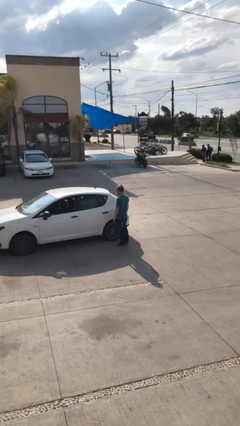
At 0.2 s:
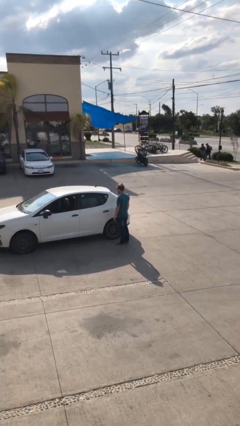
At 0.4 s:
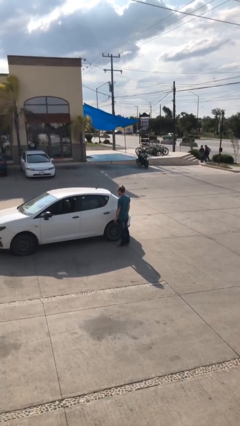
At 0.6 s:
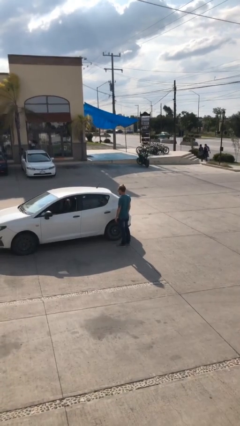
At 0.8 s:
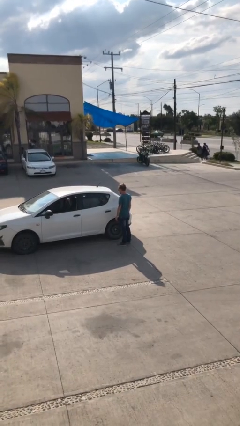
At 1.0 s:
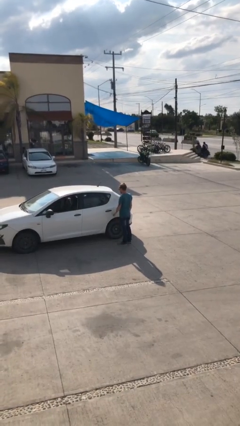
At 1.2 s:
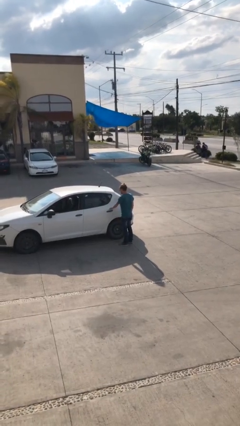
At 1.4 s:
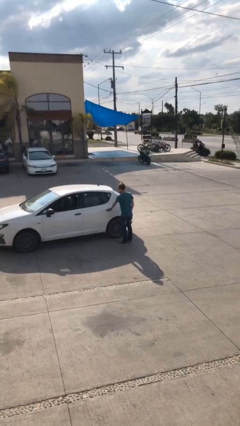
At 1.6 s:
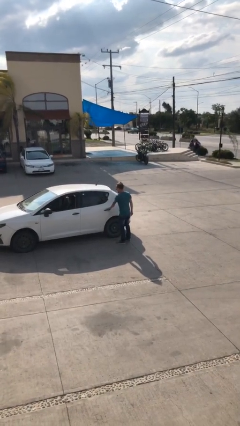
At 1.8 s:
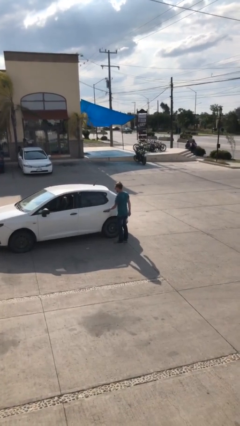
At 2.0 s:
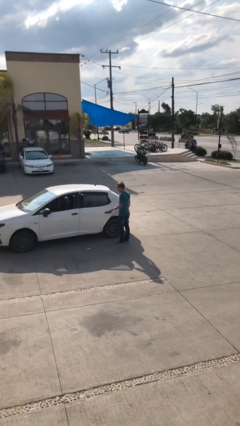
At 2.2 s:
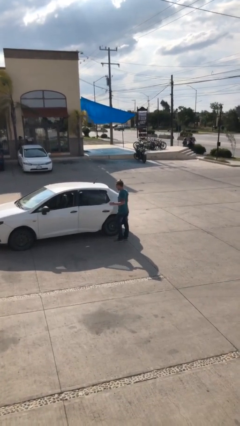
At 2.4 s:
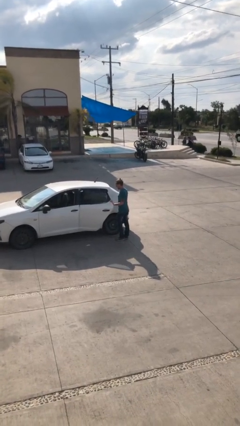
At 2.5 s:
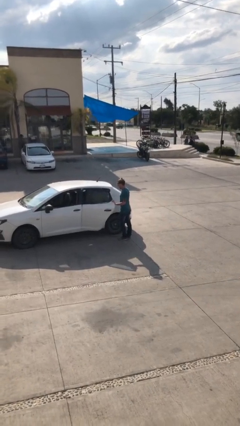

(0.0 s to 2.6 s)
person opens car door

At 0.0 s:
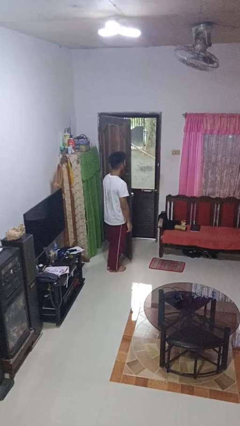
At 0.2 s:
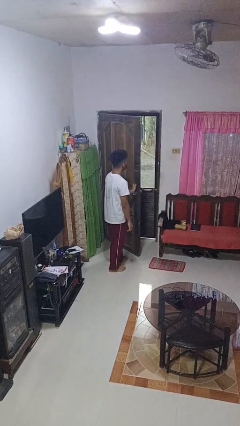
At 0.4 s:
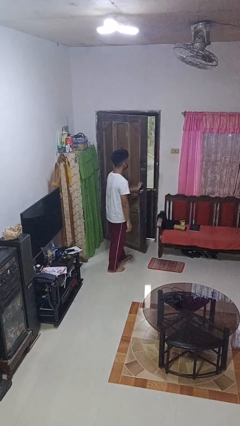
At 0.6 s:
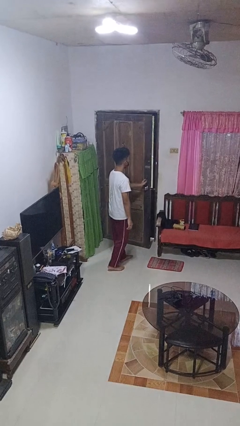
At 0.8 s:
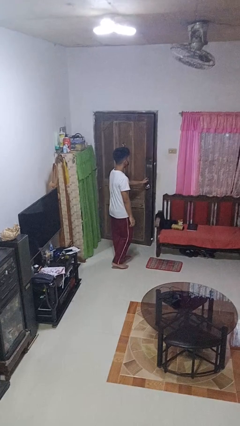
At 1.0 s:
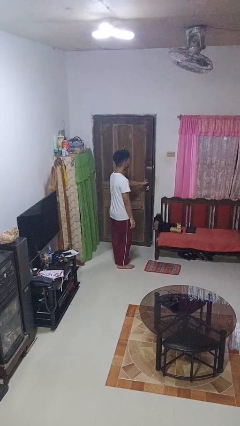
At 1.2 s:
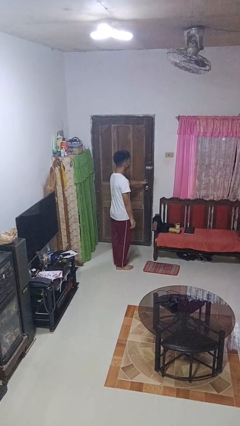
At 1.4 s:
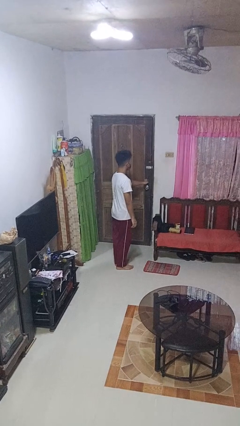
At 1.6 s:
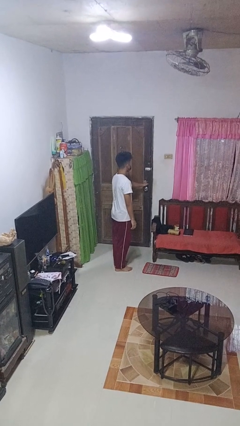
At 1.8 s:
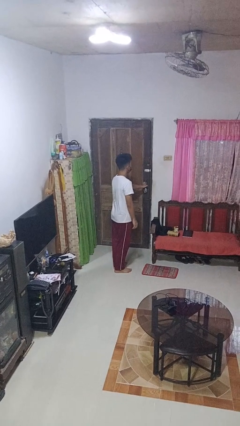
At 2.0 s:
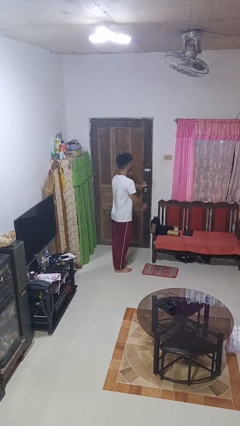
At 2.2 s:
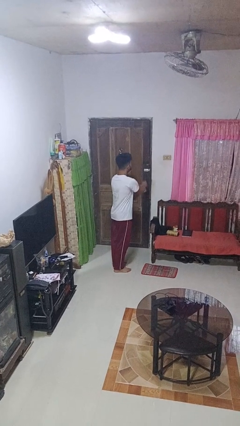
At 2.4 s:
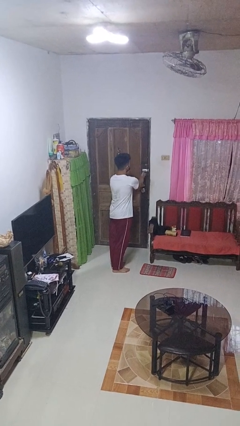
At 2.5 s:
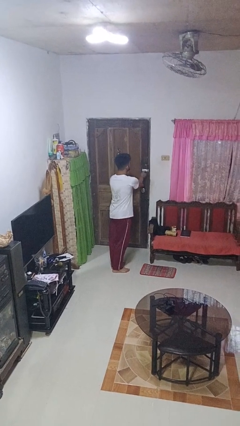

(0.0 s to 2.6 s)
person closes facility door

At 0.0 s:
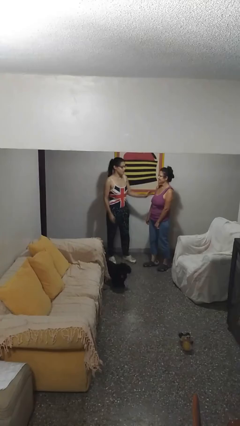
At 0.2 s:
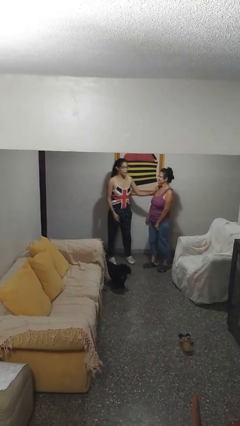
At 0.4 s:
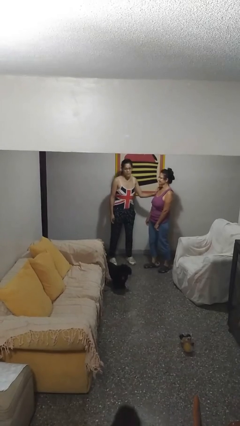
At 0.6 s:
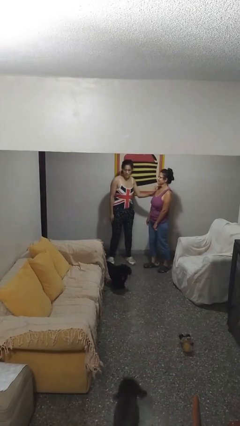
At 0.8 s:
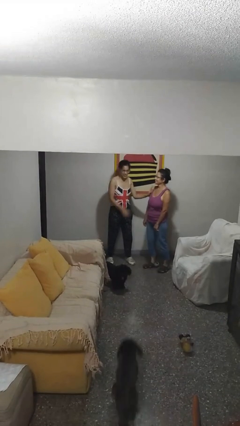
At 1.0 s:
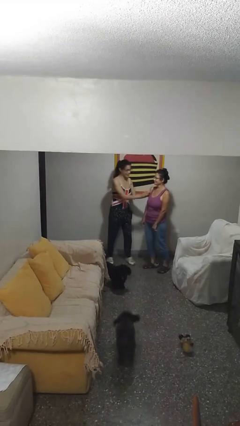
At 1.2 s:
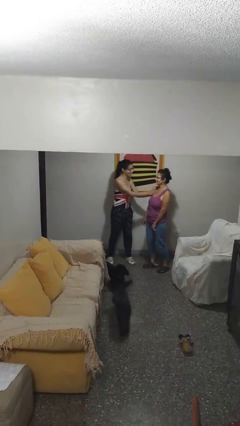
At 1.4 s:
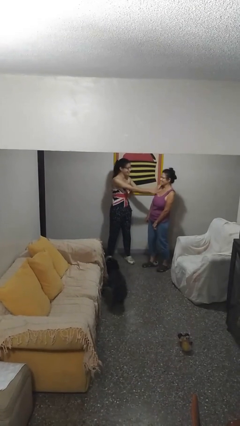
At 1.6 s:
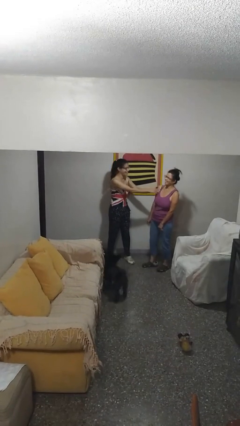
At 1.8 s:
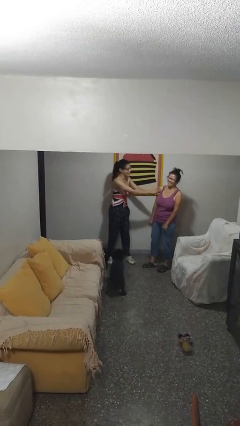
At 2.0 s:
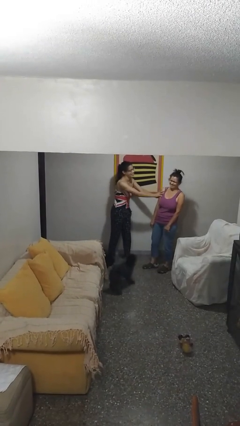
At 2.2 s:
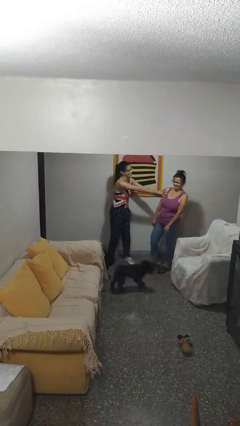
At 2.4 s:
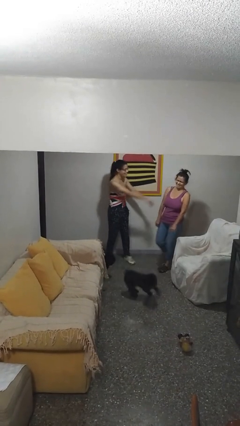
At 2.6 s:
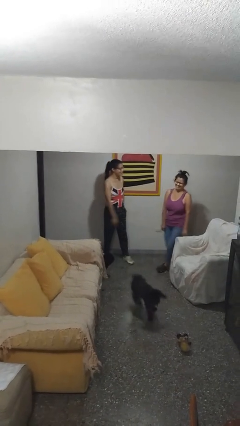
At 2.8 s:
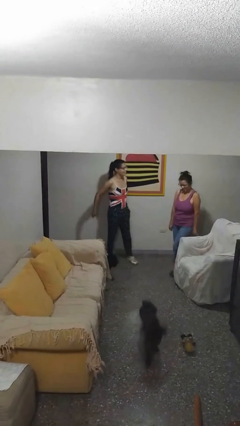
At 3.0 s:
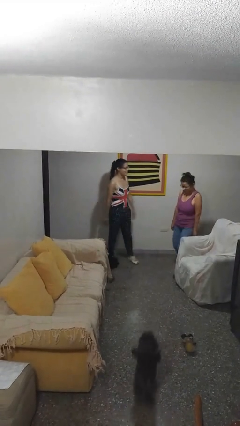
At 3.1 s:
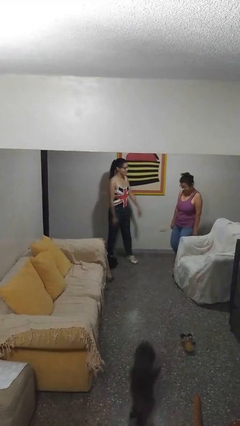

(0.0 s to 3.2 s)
person shoves person

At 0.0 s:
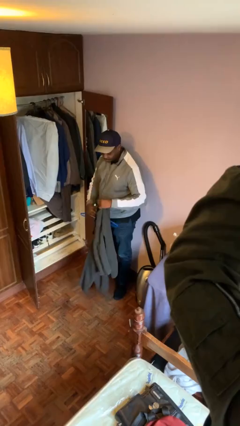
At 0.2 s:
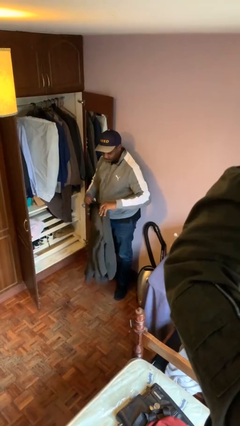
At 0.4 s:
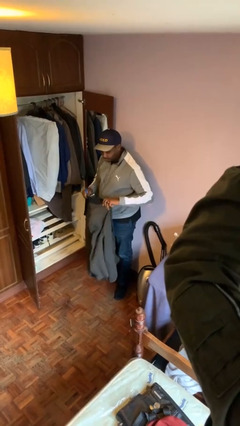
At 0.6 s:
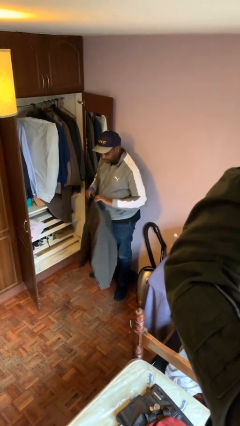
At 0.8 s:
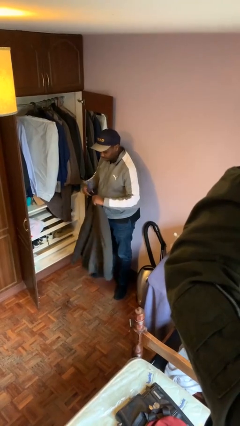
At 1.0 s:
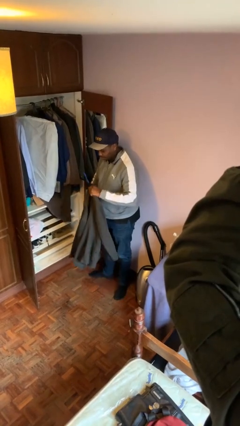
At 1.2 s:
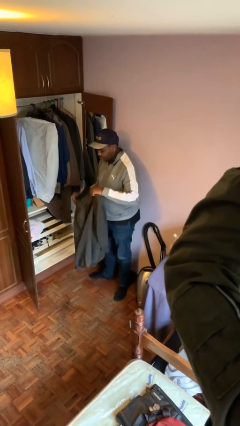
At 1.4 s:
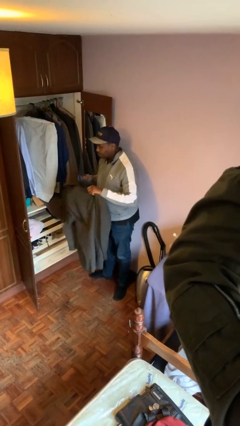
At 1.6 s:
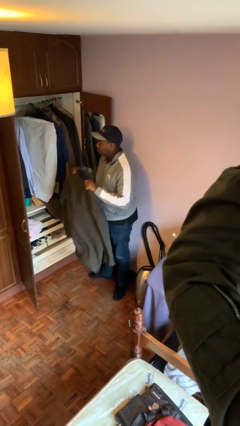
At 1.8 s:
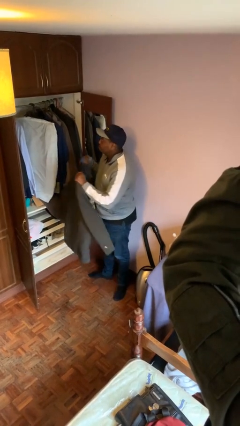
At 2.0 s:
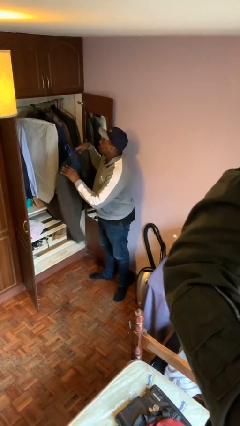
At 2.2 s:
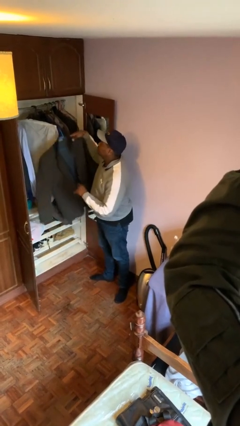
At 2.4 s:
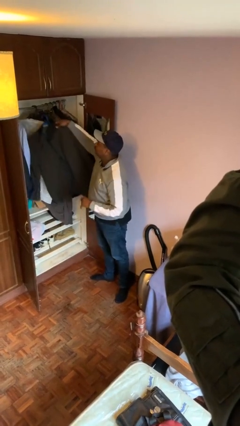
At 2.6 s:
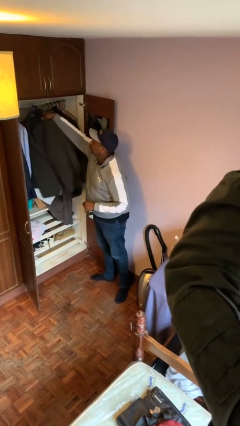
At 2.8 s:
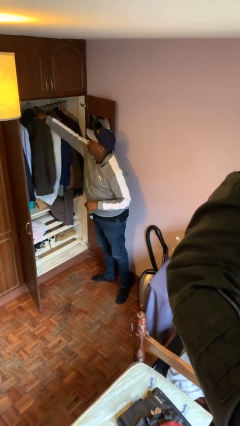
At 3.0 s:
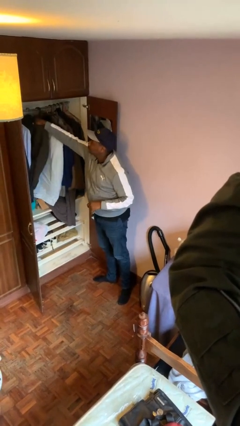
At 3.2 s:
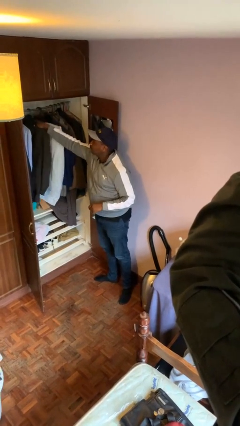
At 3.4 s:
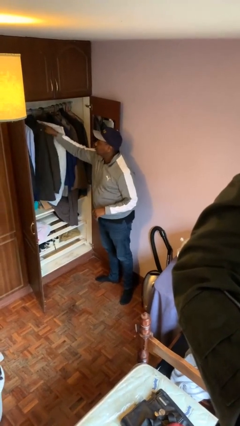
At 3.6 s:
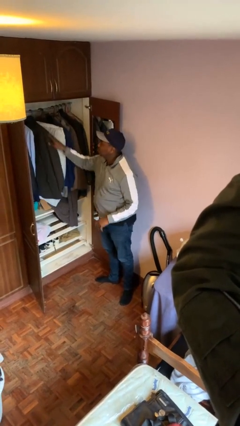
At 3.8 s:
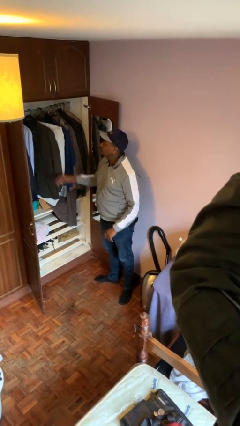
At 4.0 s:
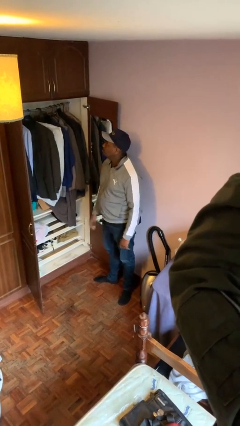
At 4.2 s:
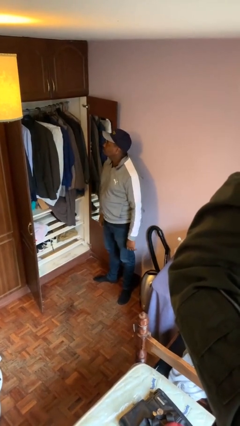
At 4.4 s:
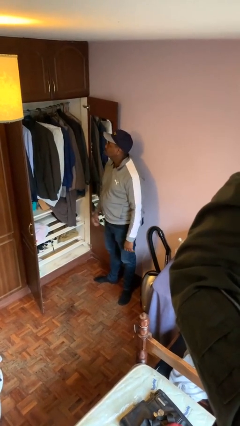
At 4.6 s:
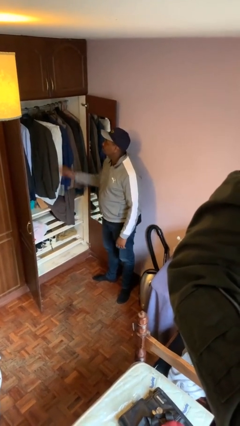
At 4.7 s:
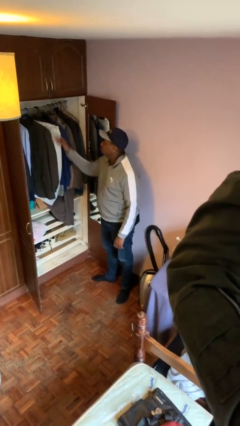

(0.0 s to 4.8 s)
person puts clothes into closet

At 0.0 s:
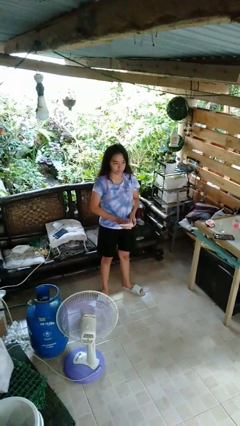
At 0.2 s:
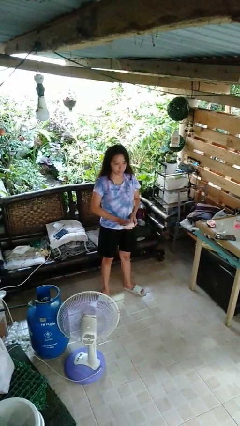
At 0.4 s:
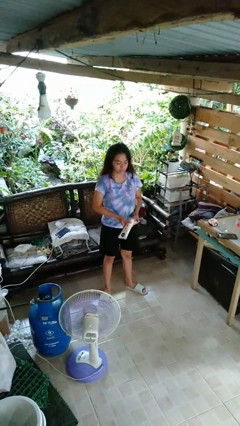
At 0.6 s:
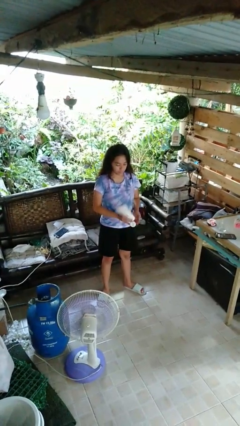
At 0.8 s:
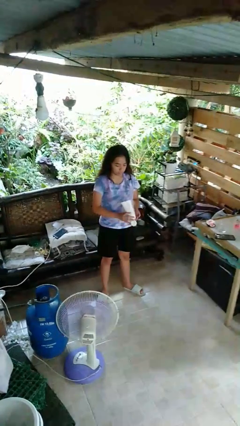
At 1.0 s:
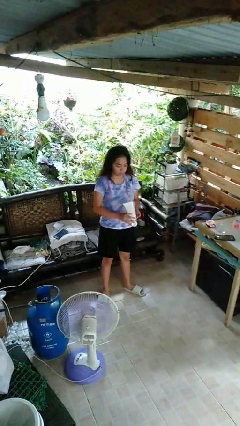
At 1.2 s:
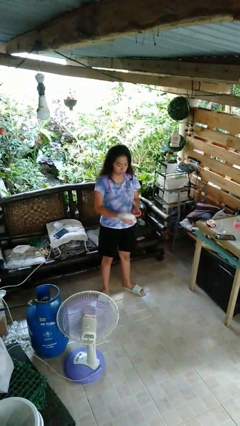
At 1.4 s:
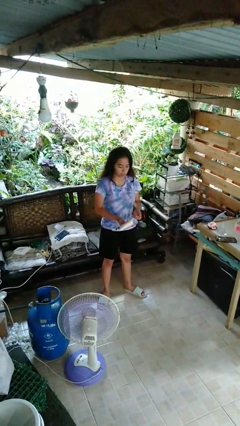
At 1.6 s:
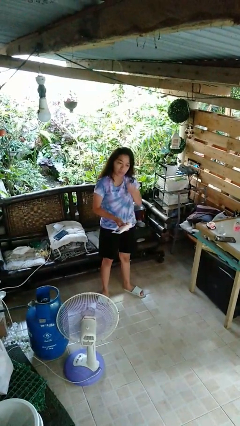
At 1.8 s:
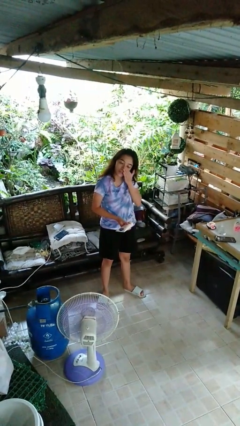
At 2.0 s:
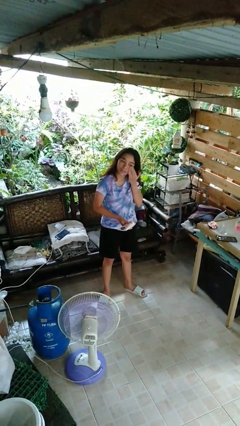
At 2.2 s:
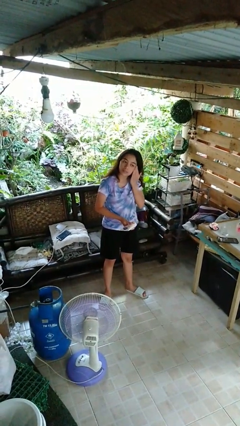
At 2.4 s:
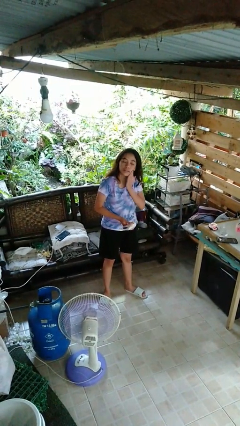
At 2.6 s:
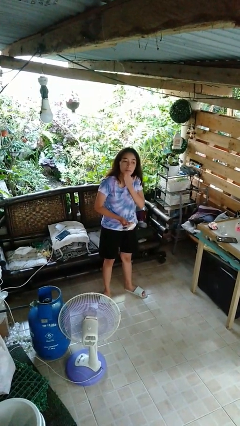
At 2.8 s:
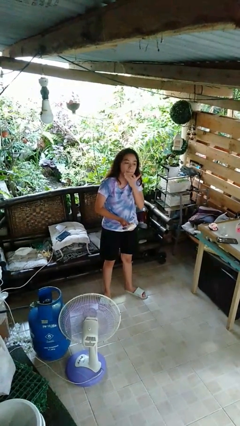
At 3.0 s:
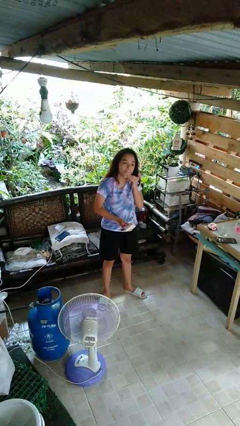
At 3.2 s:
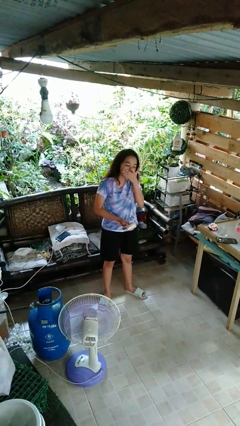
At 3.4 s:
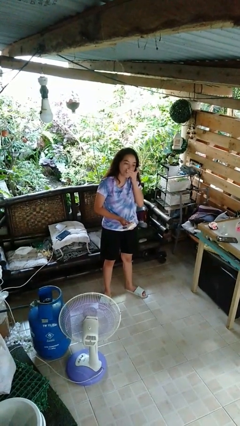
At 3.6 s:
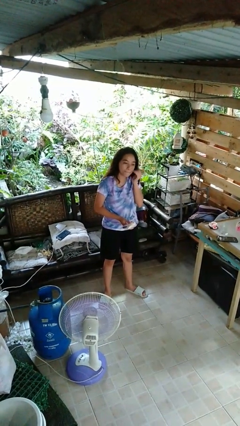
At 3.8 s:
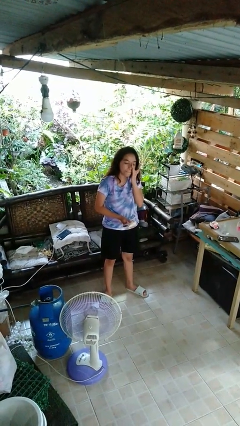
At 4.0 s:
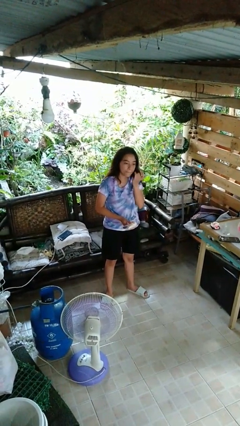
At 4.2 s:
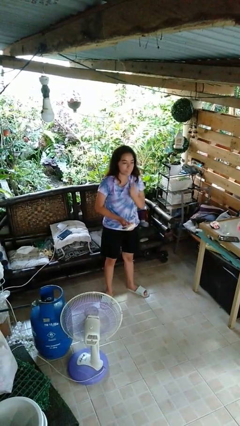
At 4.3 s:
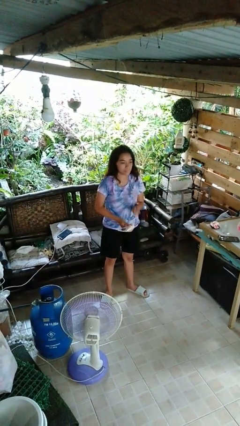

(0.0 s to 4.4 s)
person applies sunscreen

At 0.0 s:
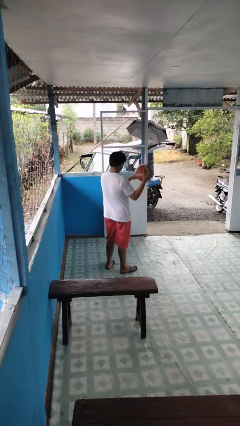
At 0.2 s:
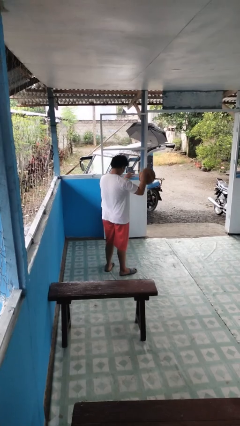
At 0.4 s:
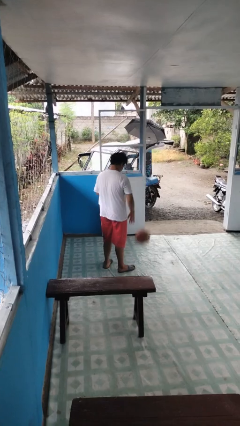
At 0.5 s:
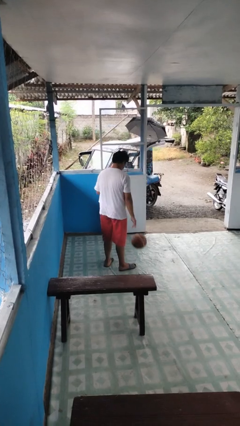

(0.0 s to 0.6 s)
person bounces ball on floor
